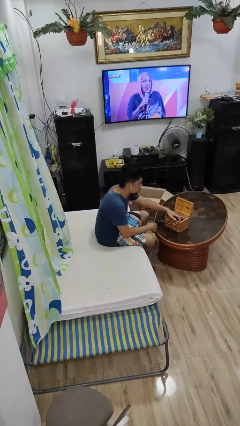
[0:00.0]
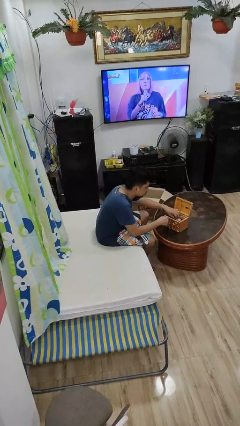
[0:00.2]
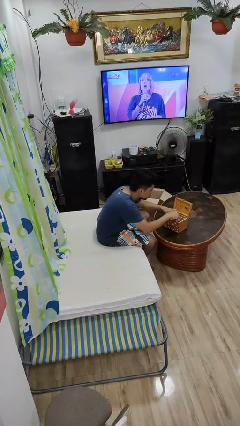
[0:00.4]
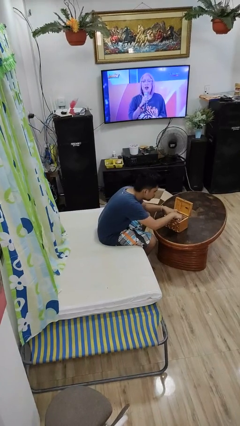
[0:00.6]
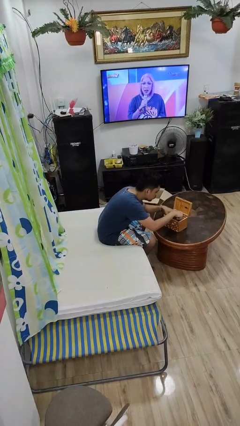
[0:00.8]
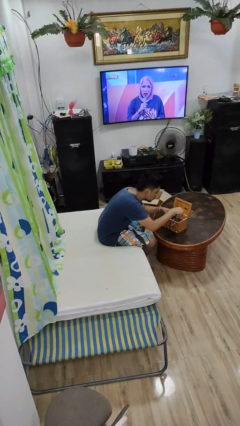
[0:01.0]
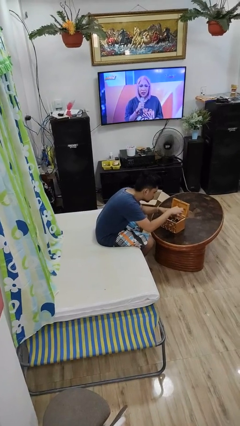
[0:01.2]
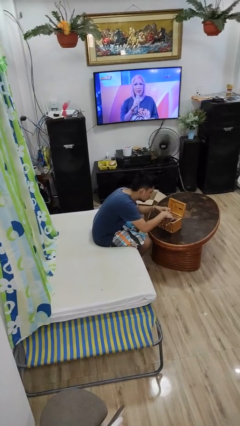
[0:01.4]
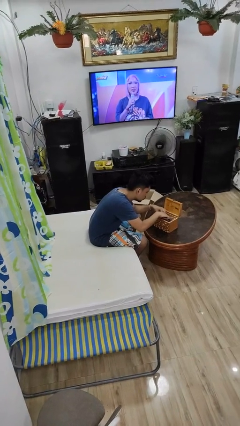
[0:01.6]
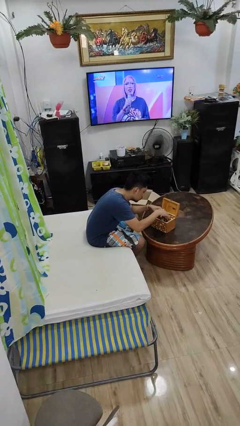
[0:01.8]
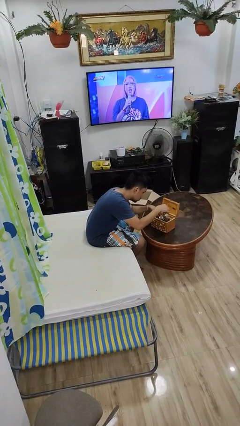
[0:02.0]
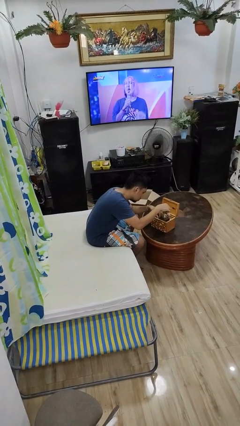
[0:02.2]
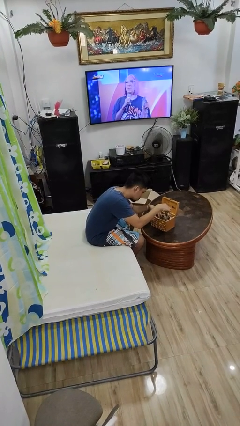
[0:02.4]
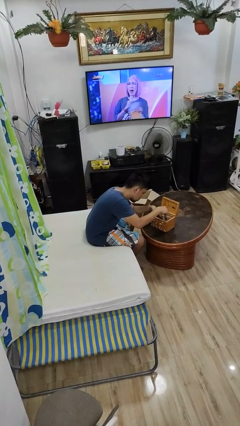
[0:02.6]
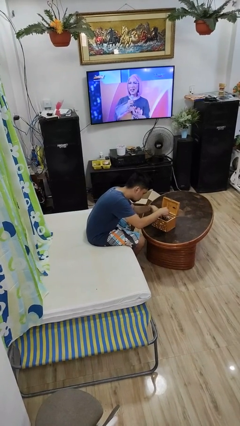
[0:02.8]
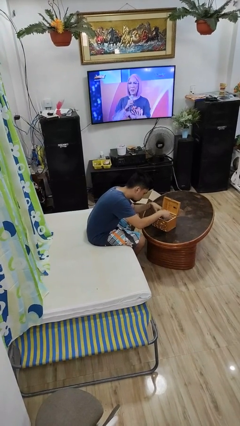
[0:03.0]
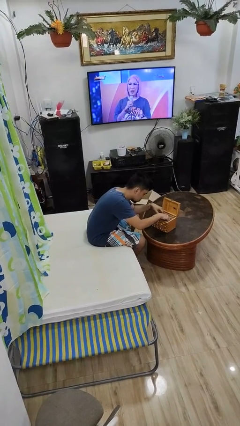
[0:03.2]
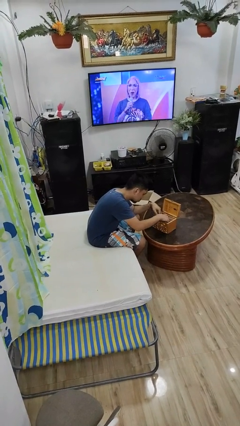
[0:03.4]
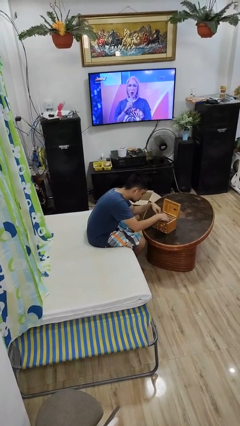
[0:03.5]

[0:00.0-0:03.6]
person searches jewelry box

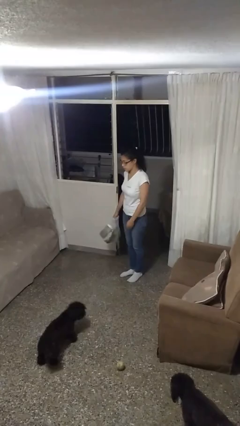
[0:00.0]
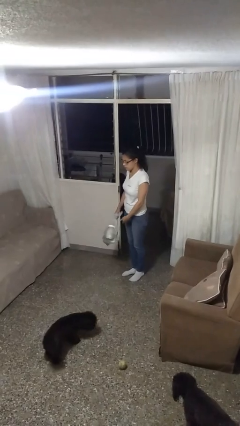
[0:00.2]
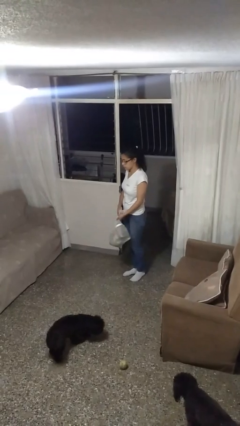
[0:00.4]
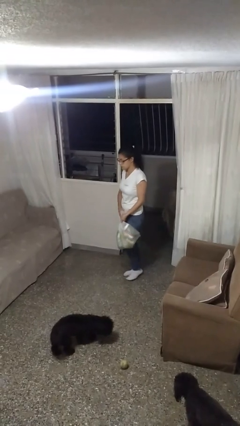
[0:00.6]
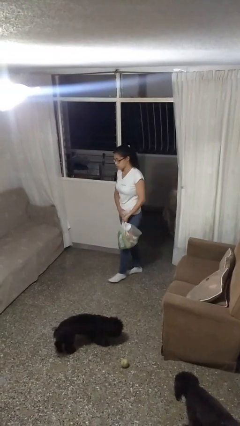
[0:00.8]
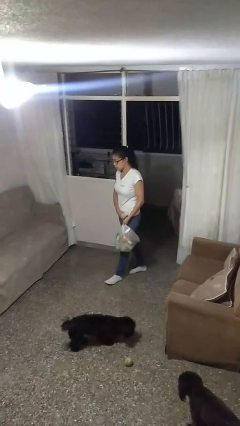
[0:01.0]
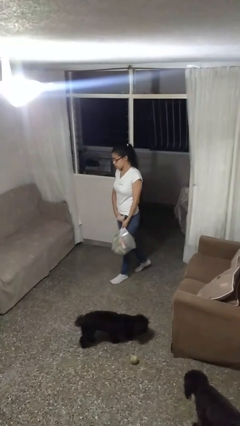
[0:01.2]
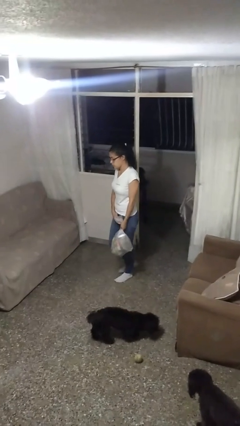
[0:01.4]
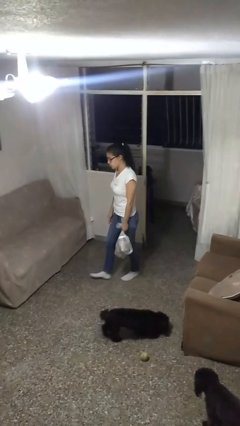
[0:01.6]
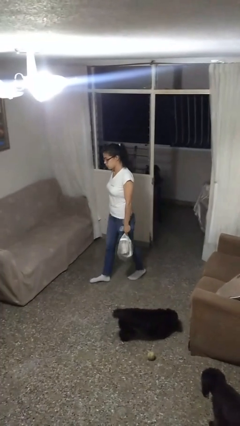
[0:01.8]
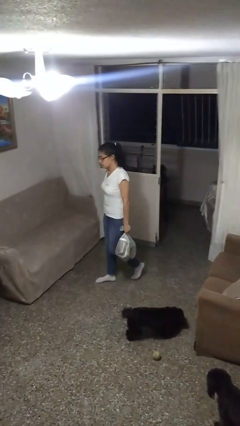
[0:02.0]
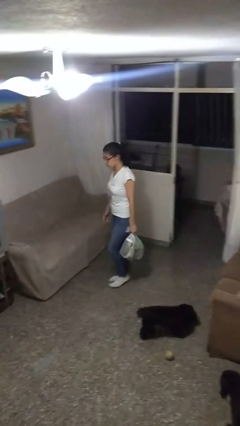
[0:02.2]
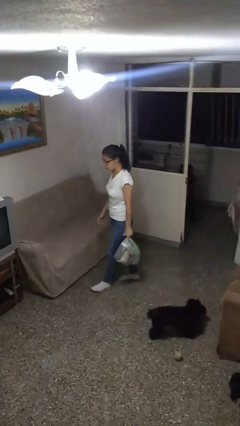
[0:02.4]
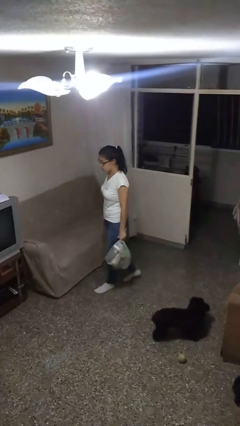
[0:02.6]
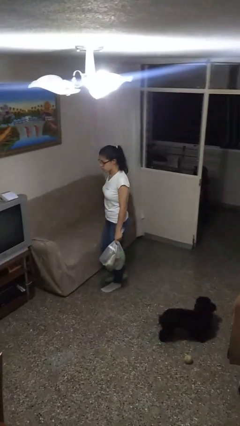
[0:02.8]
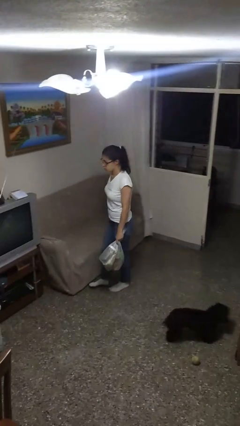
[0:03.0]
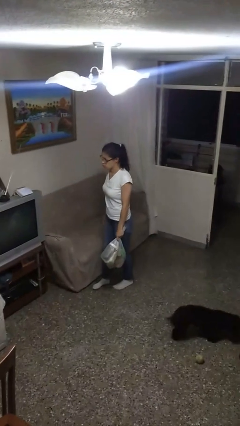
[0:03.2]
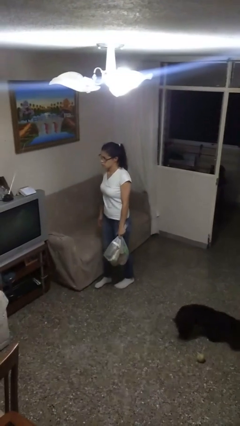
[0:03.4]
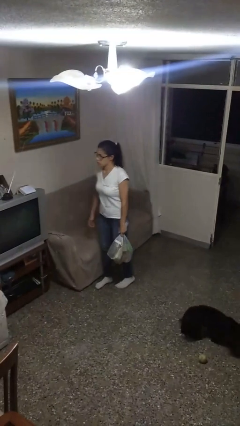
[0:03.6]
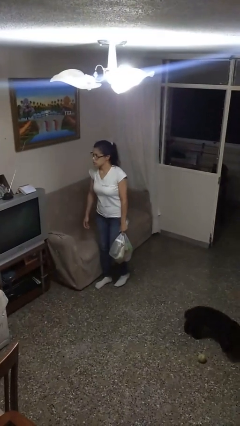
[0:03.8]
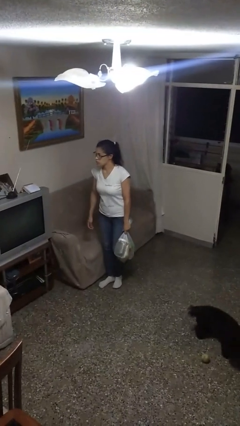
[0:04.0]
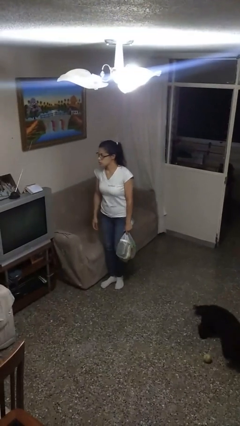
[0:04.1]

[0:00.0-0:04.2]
person carries groceries

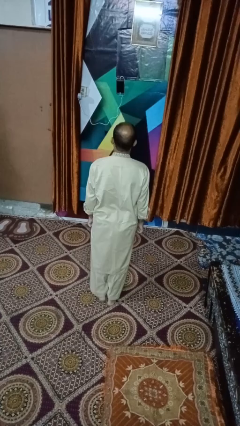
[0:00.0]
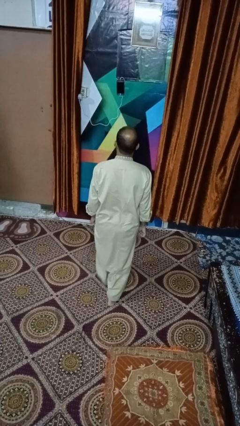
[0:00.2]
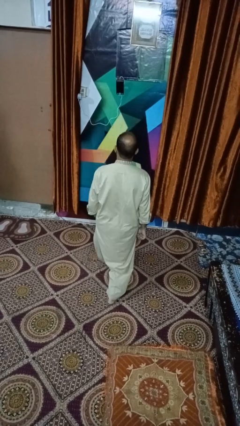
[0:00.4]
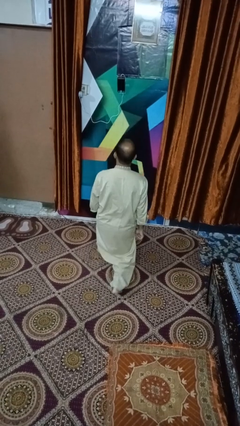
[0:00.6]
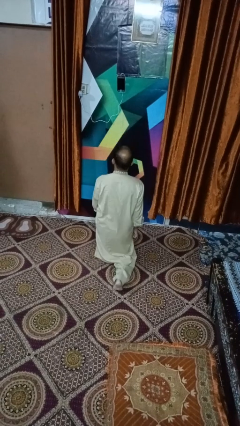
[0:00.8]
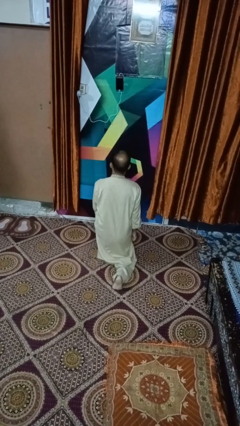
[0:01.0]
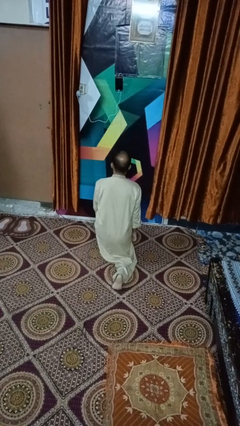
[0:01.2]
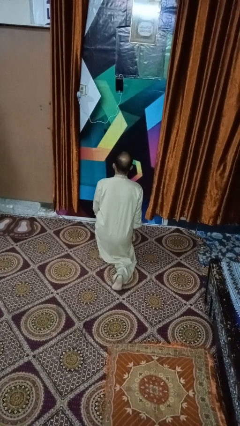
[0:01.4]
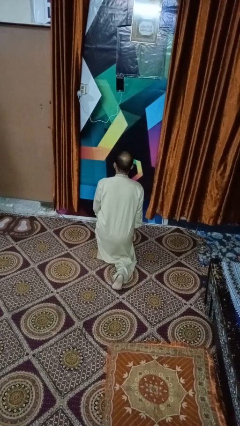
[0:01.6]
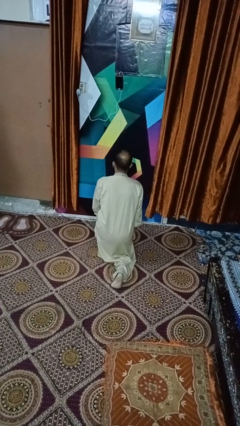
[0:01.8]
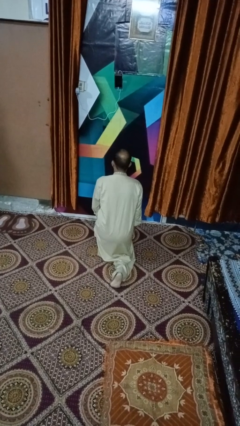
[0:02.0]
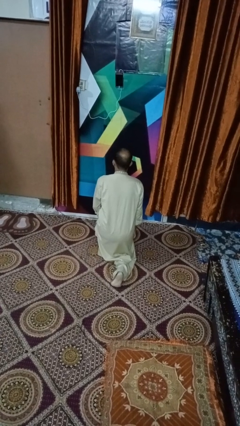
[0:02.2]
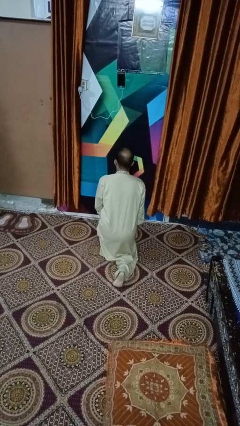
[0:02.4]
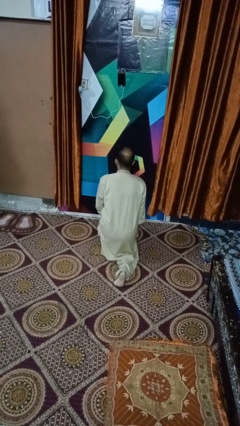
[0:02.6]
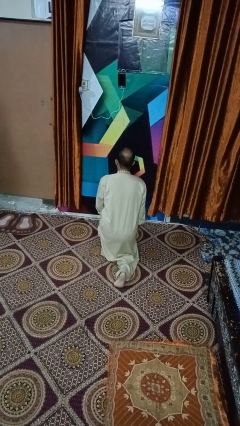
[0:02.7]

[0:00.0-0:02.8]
person exercises with lunges

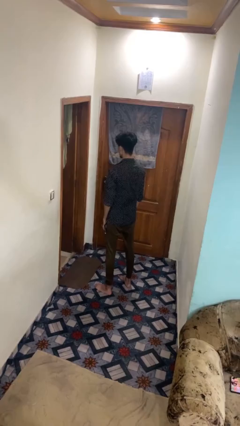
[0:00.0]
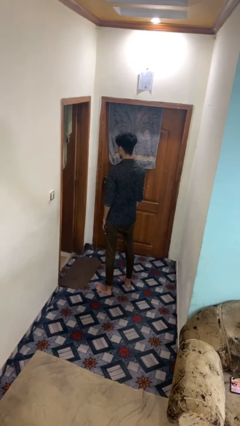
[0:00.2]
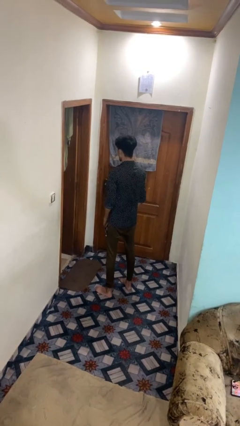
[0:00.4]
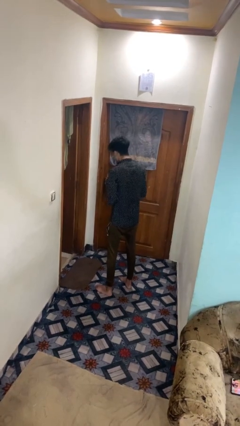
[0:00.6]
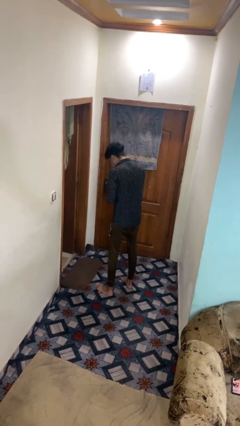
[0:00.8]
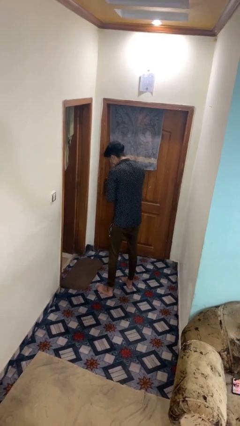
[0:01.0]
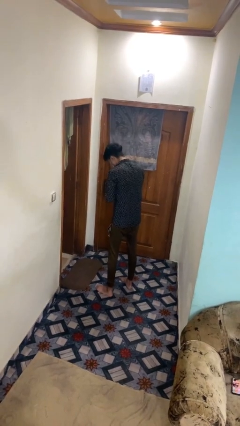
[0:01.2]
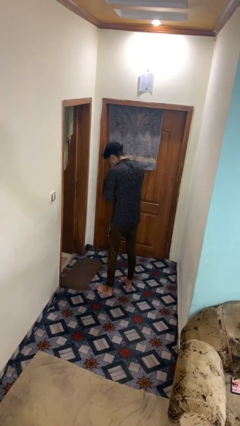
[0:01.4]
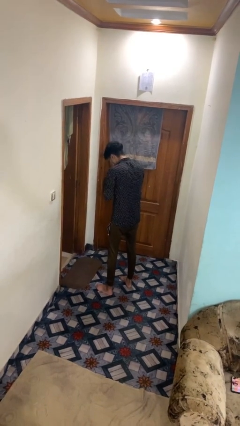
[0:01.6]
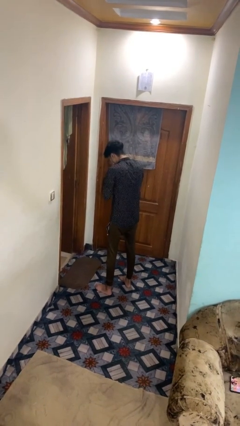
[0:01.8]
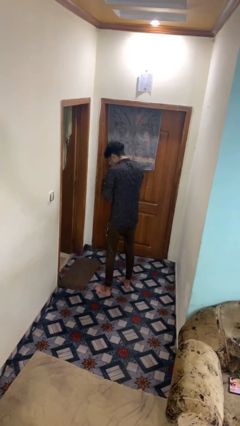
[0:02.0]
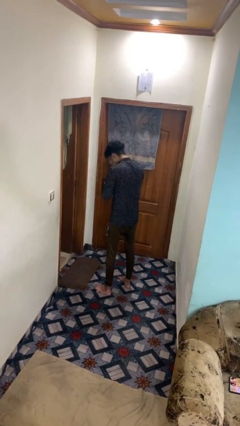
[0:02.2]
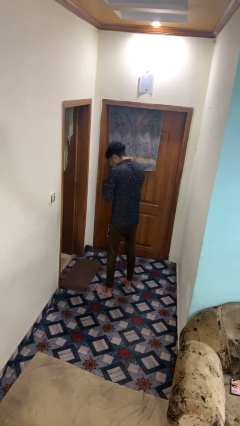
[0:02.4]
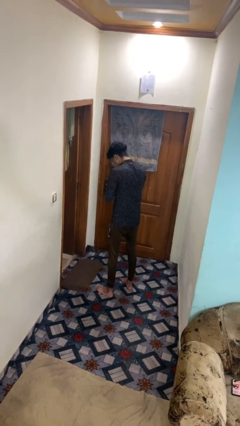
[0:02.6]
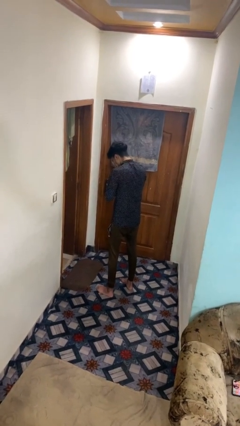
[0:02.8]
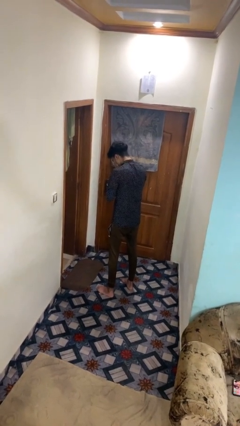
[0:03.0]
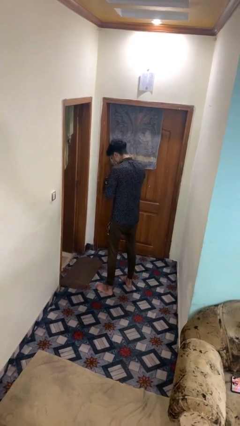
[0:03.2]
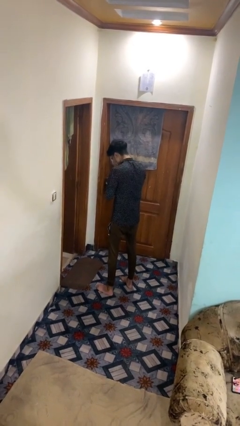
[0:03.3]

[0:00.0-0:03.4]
person sneezes into hand

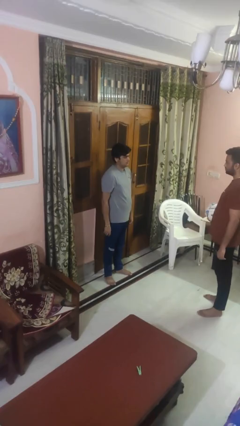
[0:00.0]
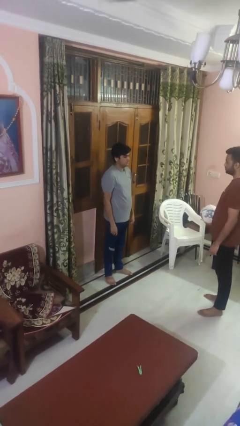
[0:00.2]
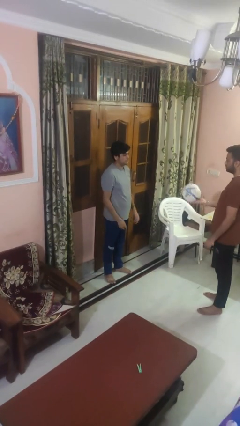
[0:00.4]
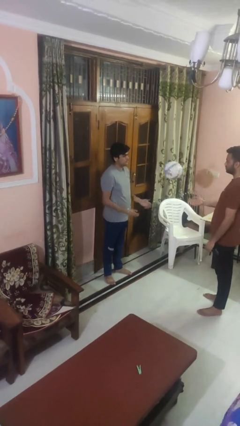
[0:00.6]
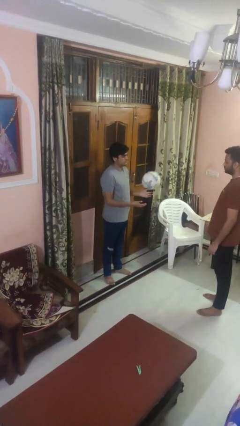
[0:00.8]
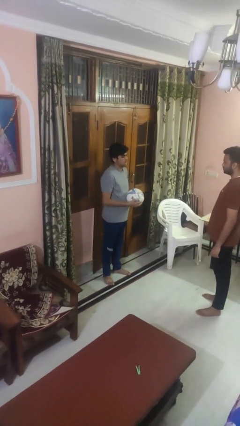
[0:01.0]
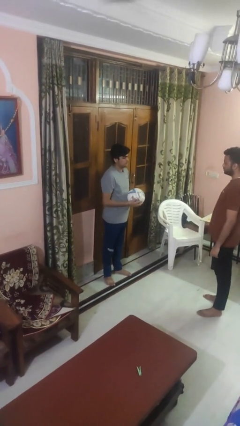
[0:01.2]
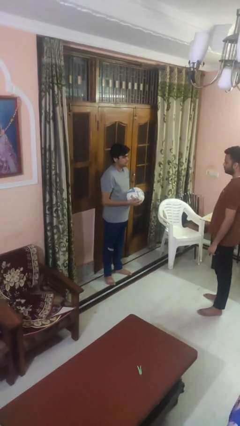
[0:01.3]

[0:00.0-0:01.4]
person catches object from person

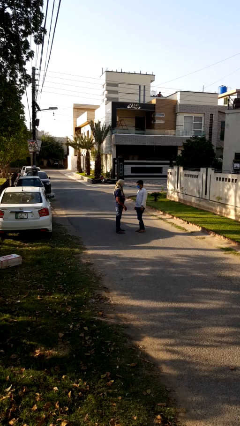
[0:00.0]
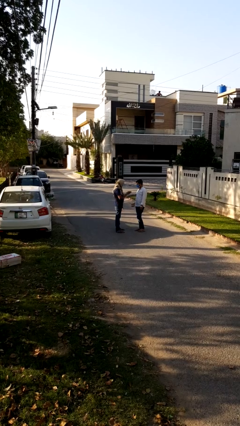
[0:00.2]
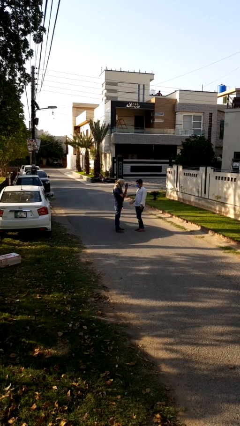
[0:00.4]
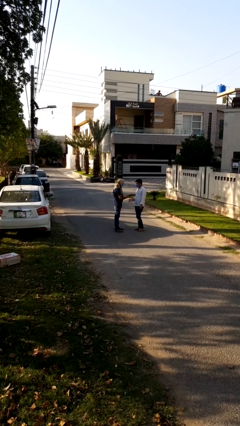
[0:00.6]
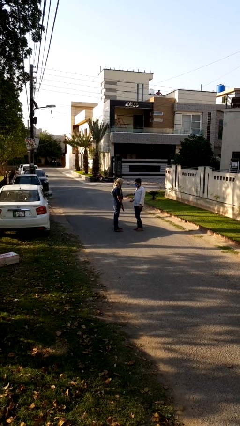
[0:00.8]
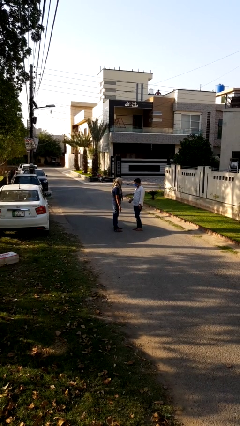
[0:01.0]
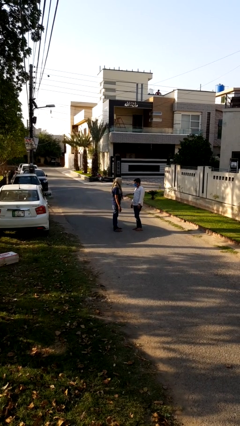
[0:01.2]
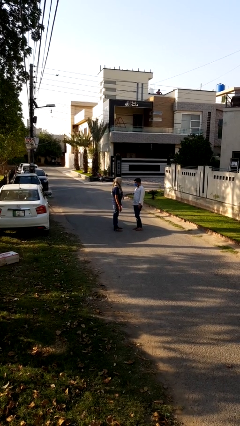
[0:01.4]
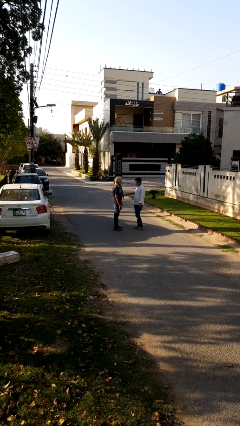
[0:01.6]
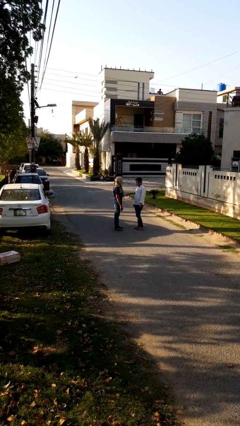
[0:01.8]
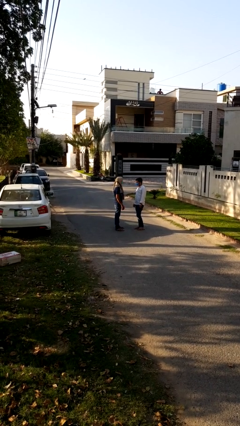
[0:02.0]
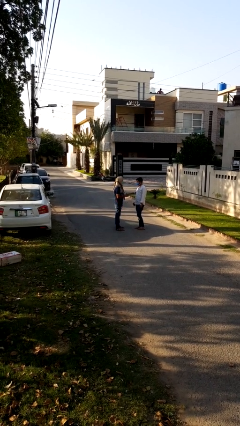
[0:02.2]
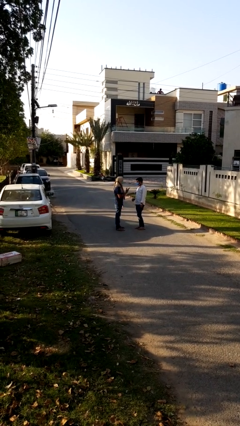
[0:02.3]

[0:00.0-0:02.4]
person highfives hand
